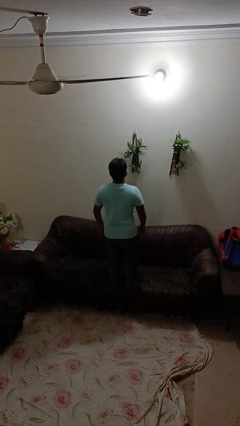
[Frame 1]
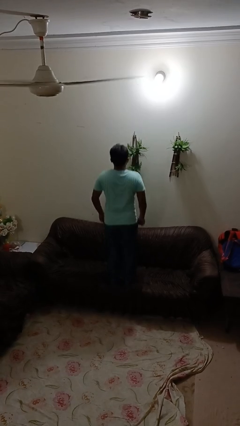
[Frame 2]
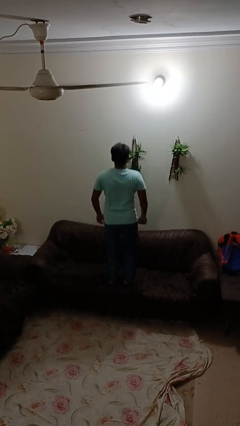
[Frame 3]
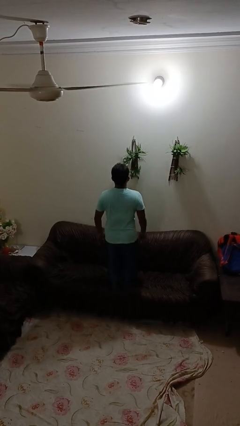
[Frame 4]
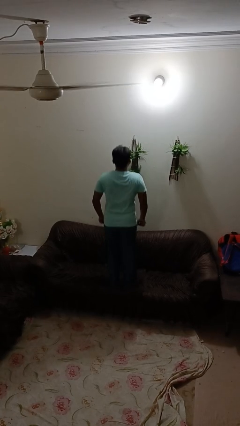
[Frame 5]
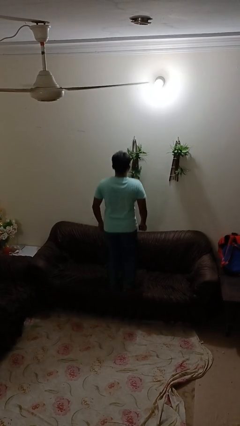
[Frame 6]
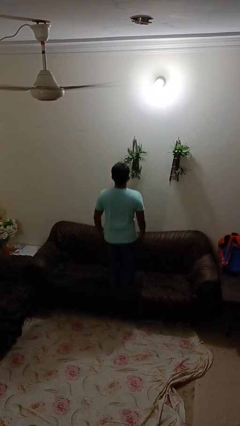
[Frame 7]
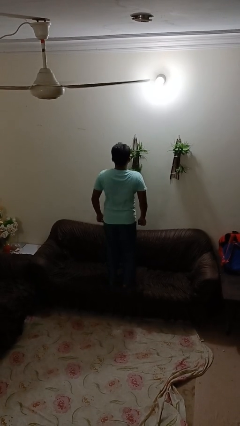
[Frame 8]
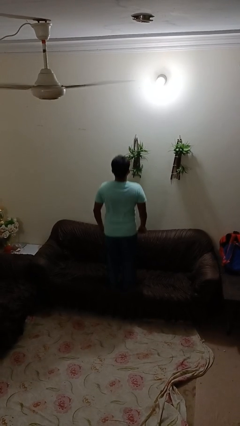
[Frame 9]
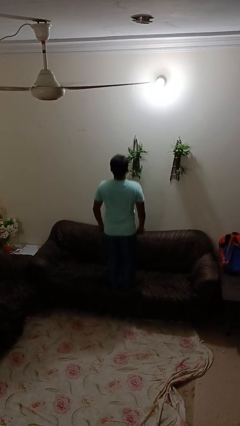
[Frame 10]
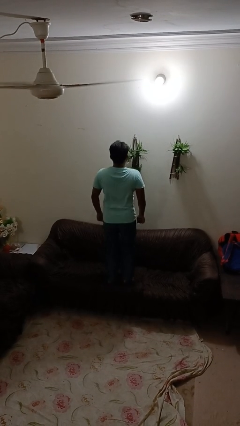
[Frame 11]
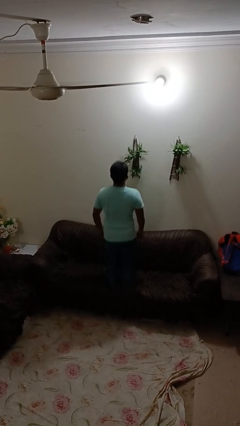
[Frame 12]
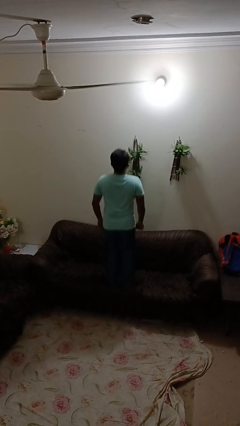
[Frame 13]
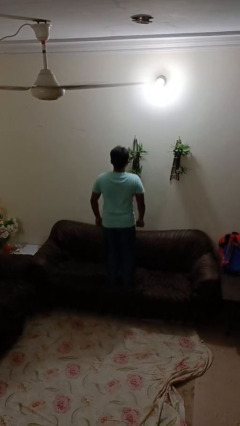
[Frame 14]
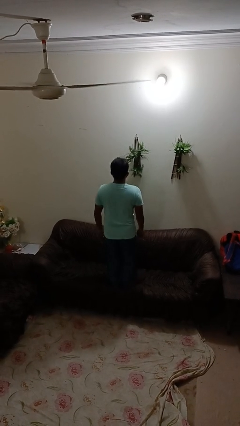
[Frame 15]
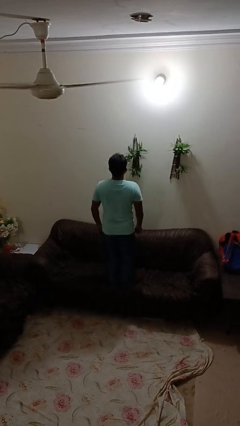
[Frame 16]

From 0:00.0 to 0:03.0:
person jumps on couch

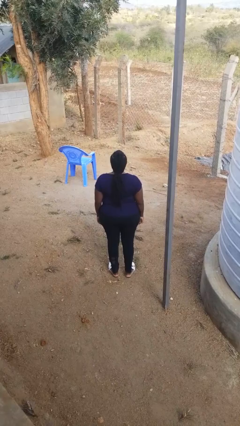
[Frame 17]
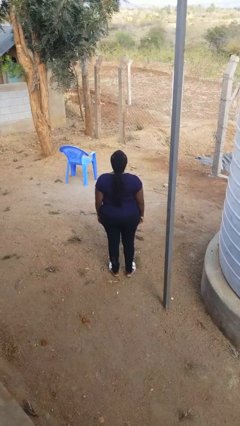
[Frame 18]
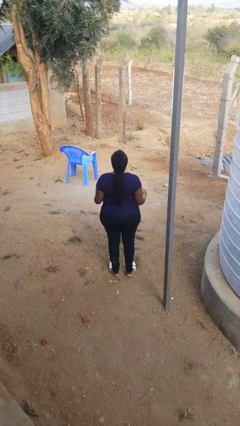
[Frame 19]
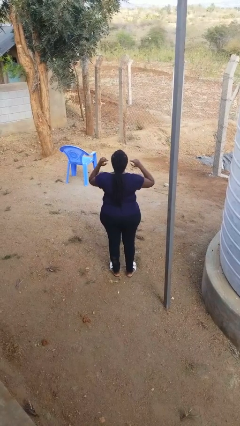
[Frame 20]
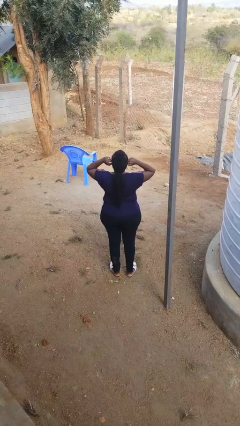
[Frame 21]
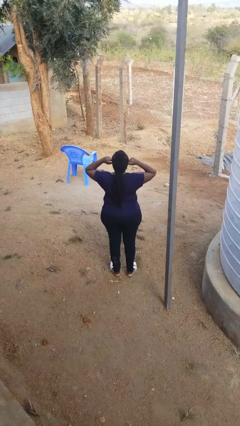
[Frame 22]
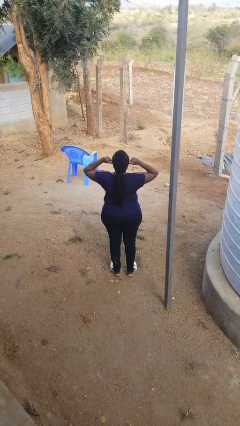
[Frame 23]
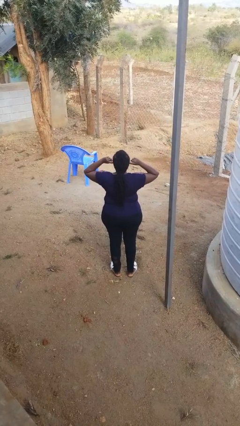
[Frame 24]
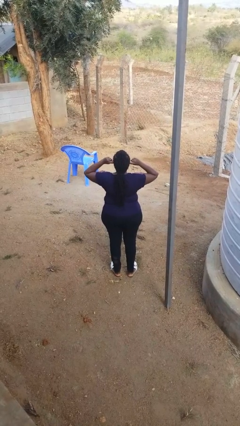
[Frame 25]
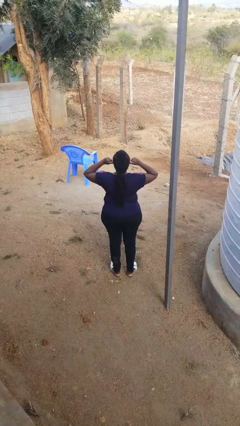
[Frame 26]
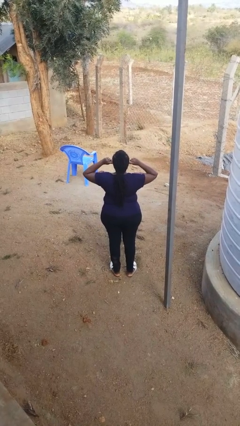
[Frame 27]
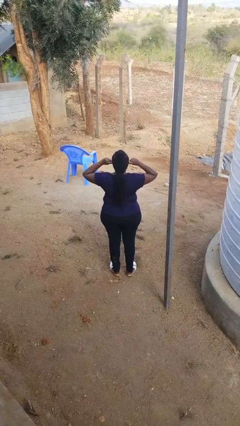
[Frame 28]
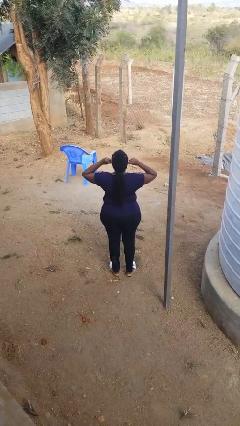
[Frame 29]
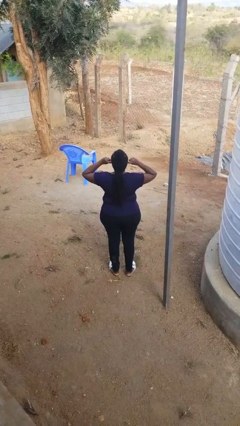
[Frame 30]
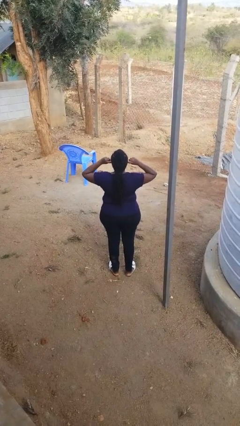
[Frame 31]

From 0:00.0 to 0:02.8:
person puts fingers in ear

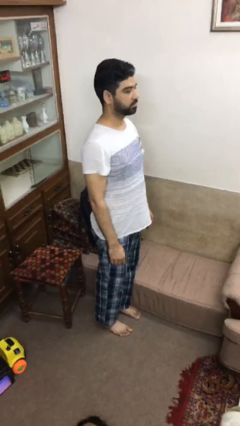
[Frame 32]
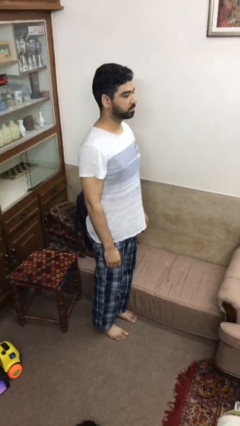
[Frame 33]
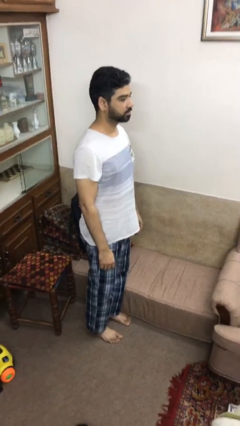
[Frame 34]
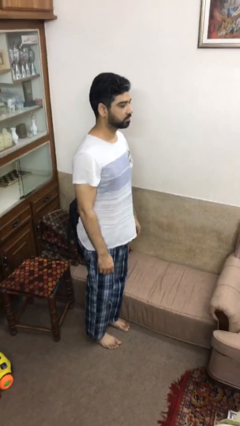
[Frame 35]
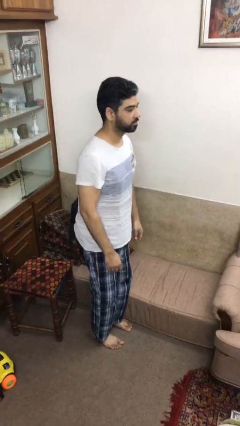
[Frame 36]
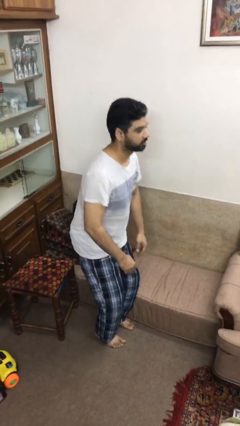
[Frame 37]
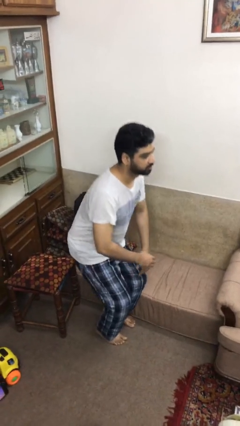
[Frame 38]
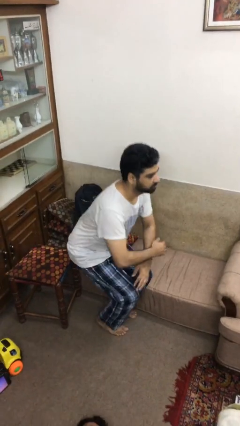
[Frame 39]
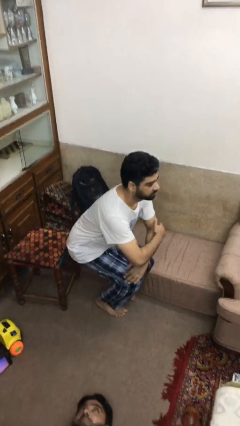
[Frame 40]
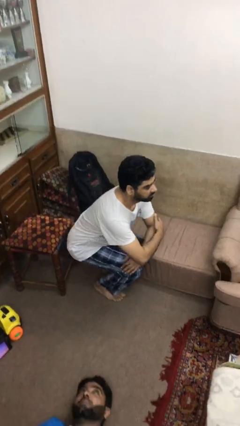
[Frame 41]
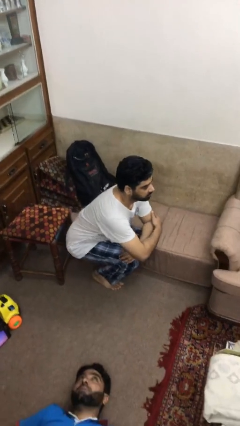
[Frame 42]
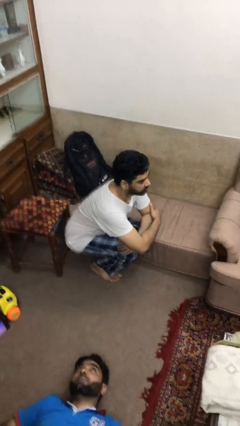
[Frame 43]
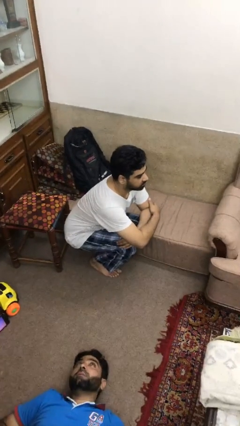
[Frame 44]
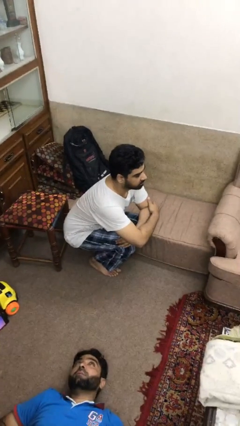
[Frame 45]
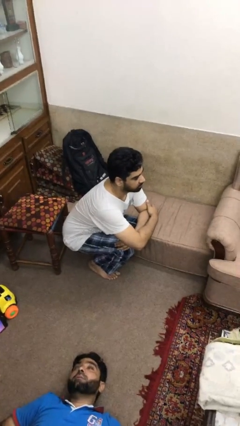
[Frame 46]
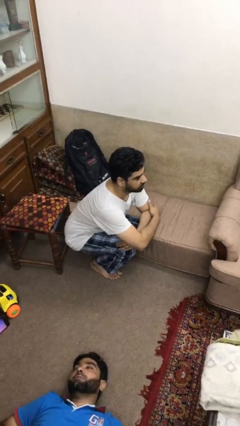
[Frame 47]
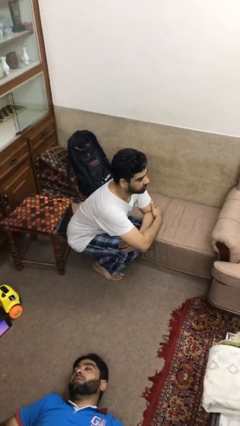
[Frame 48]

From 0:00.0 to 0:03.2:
person squats

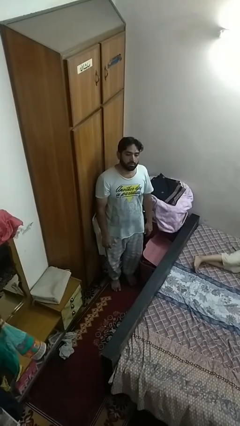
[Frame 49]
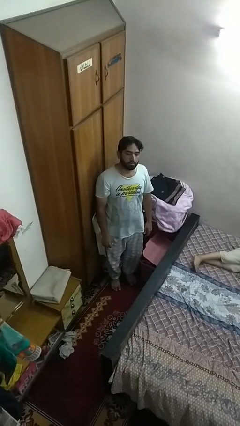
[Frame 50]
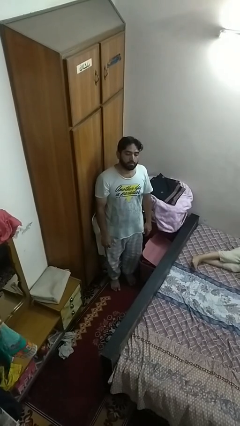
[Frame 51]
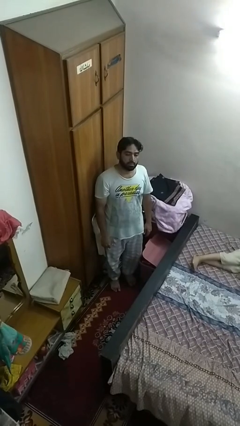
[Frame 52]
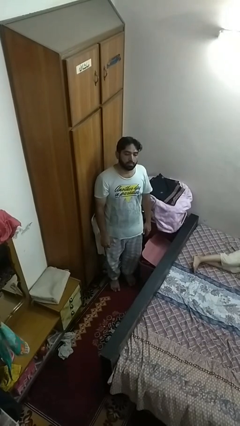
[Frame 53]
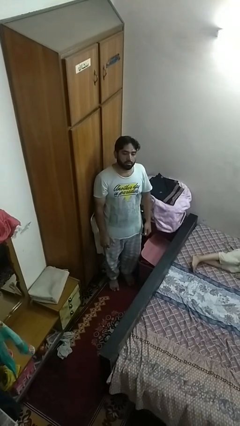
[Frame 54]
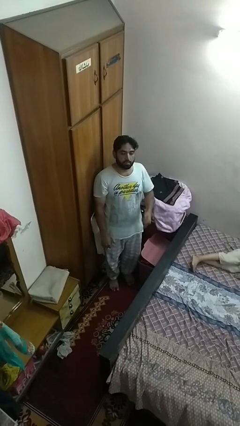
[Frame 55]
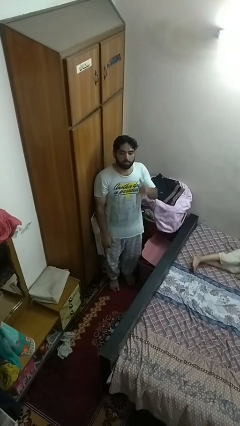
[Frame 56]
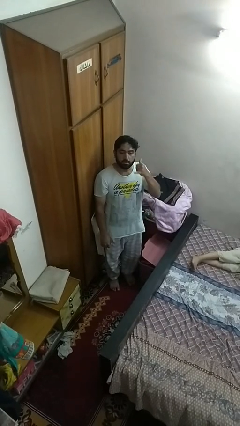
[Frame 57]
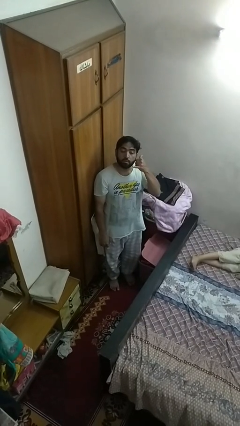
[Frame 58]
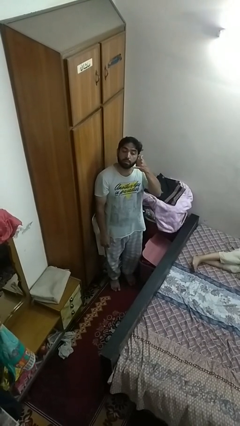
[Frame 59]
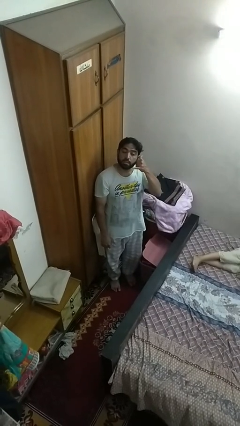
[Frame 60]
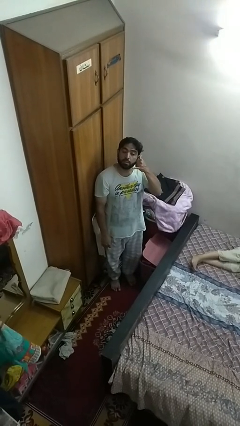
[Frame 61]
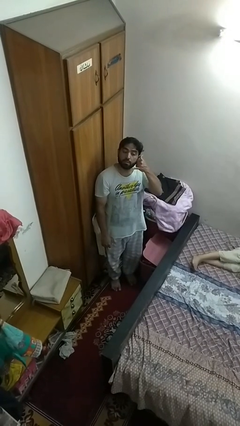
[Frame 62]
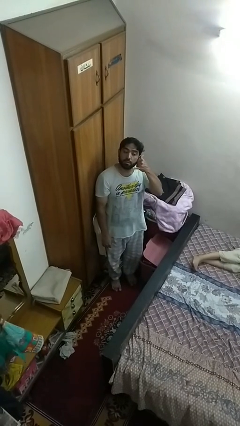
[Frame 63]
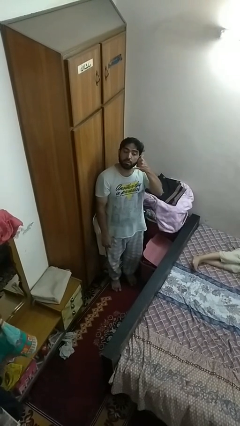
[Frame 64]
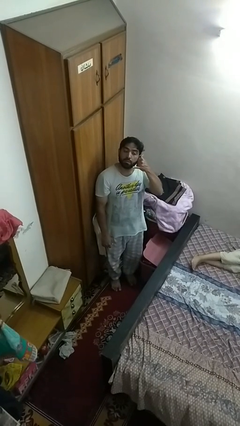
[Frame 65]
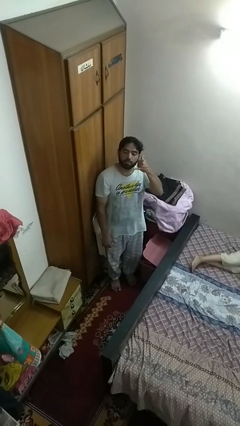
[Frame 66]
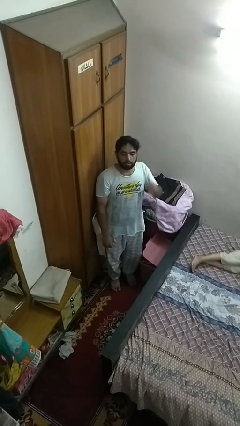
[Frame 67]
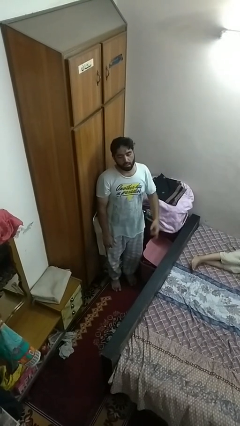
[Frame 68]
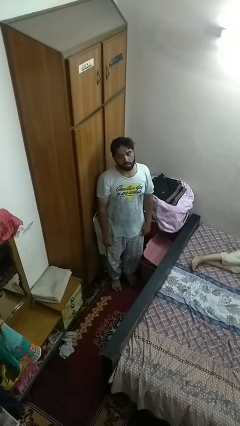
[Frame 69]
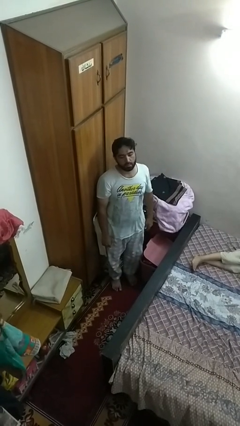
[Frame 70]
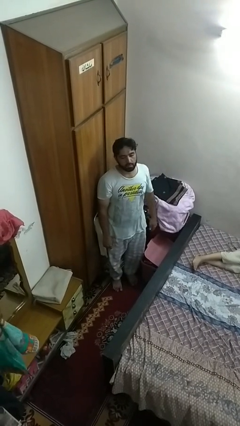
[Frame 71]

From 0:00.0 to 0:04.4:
person gestures call me

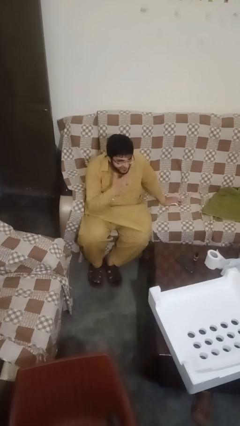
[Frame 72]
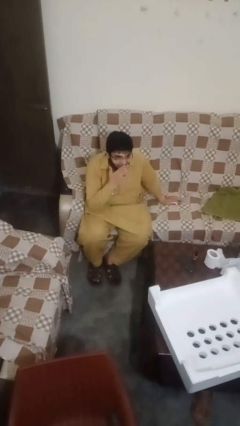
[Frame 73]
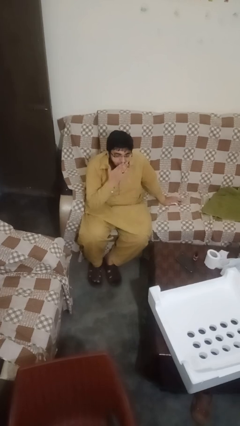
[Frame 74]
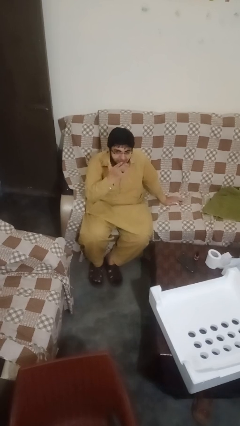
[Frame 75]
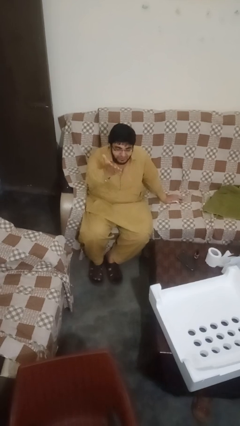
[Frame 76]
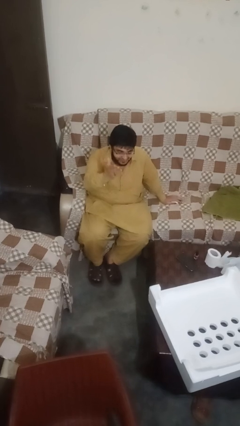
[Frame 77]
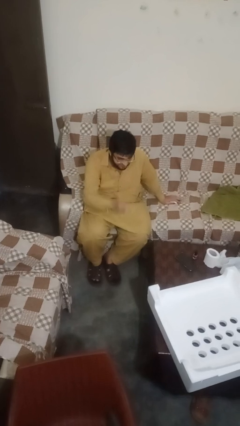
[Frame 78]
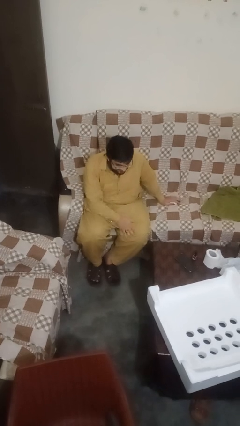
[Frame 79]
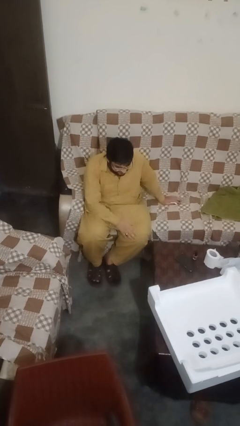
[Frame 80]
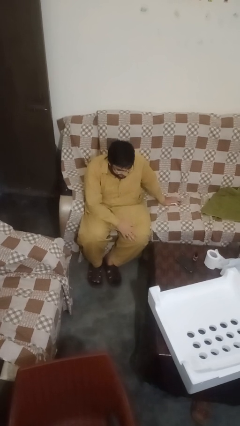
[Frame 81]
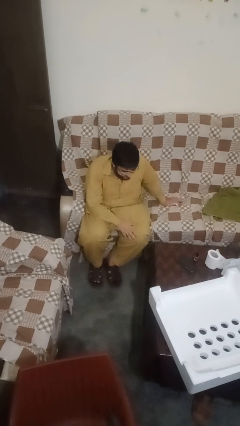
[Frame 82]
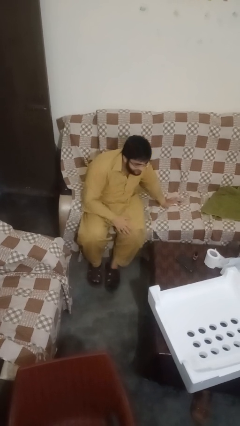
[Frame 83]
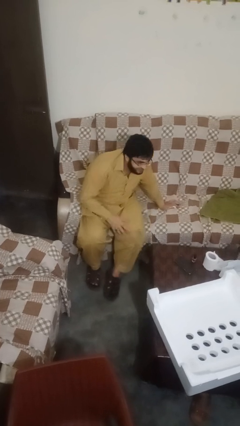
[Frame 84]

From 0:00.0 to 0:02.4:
person gestures blow kiss

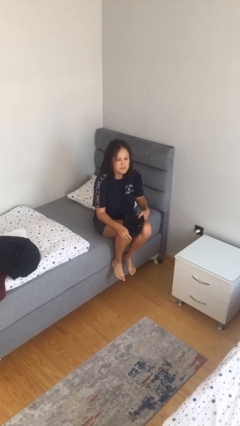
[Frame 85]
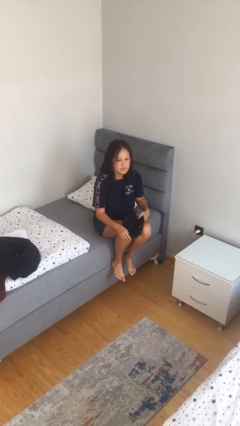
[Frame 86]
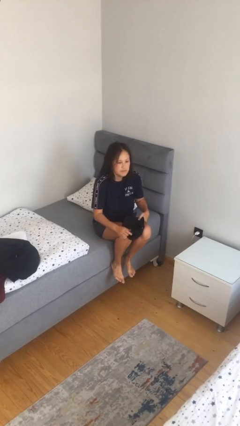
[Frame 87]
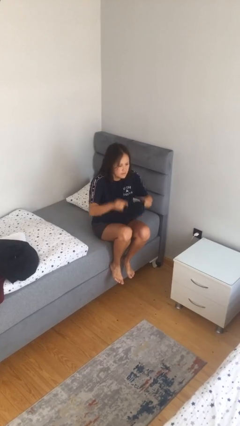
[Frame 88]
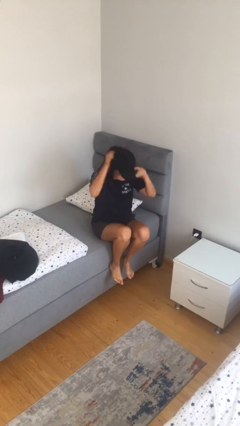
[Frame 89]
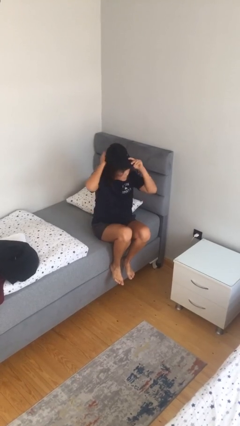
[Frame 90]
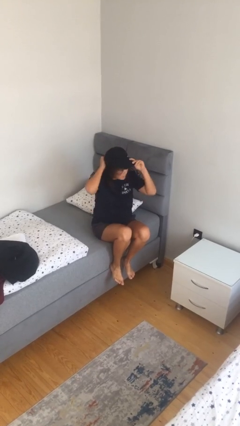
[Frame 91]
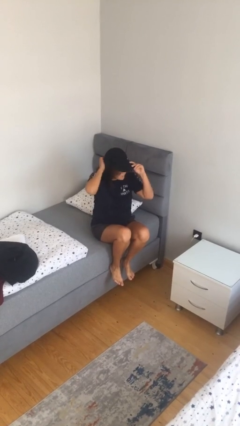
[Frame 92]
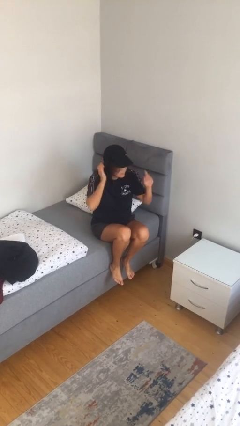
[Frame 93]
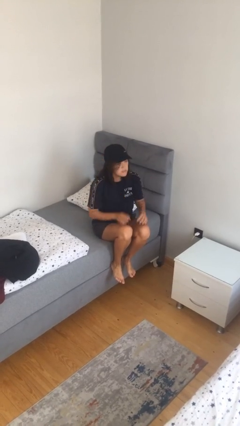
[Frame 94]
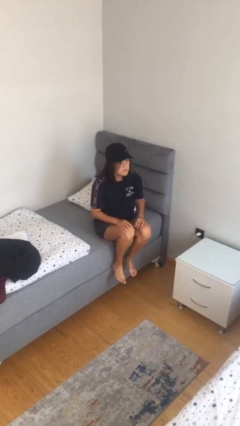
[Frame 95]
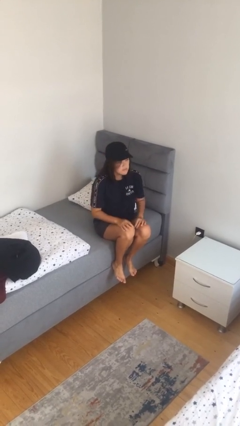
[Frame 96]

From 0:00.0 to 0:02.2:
person puts on hat
